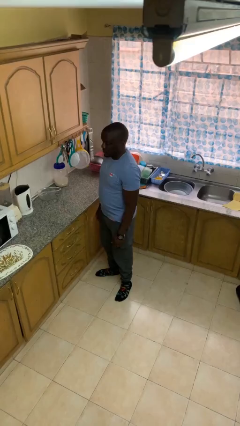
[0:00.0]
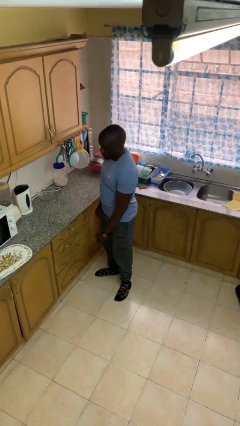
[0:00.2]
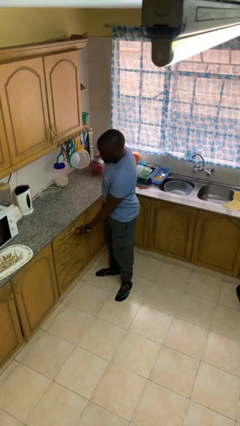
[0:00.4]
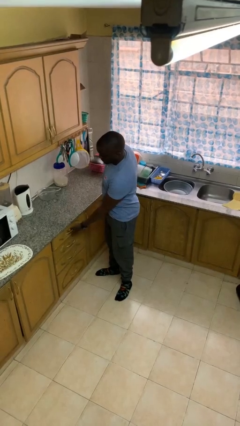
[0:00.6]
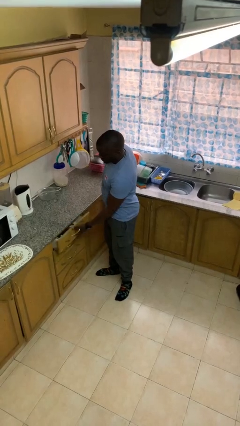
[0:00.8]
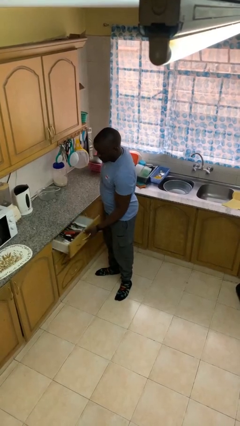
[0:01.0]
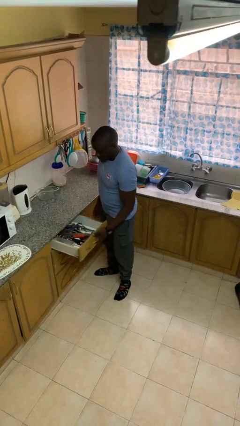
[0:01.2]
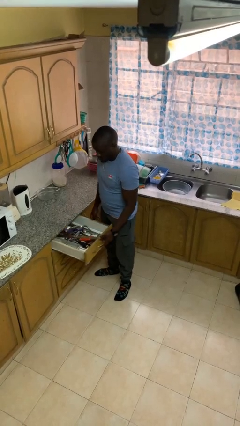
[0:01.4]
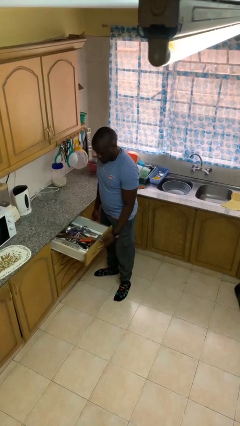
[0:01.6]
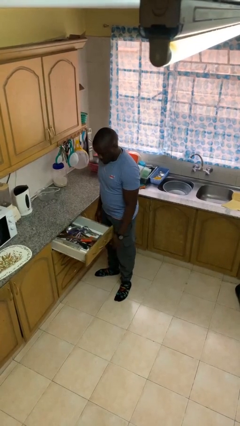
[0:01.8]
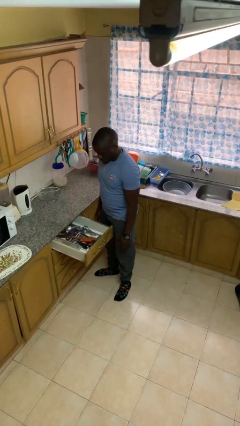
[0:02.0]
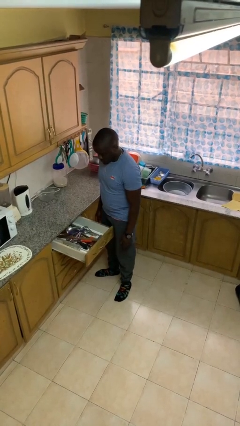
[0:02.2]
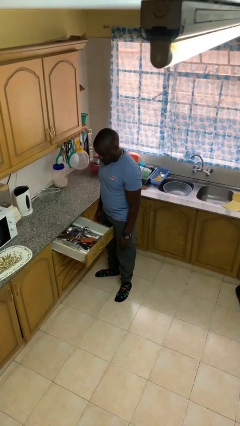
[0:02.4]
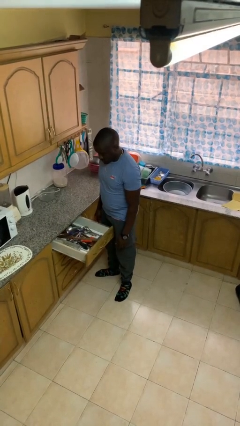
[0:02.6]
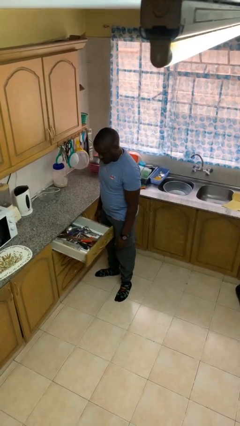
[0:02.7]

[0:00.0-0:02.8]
person opens kitchen drawer

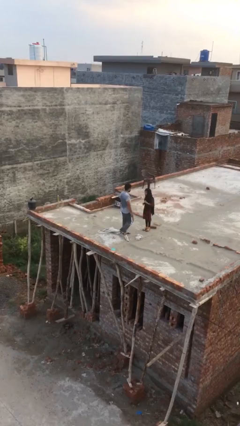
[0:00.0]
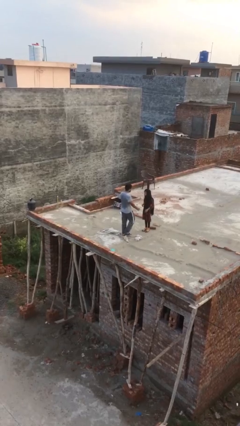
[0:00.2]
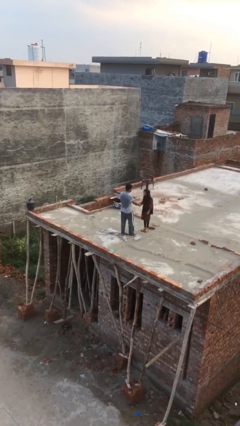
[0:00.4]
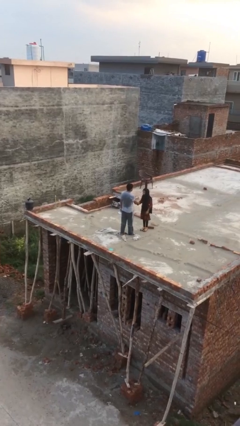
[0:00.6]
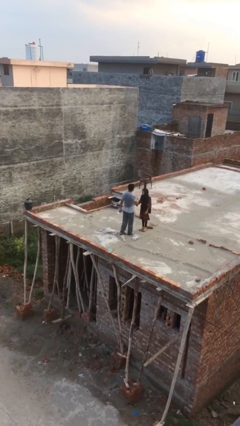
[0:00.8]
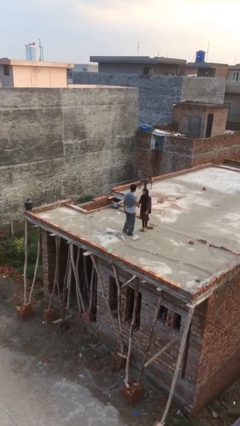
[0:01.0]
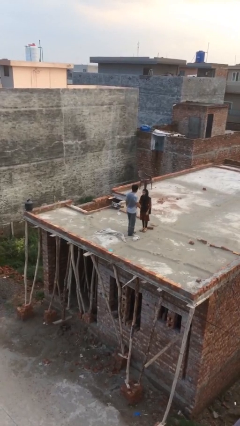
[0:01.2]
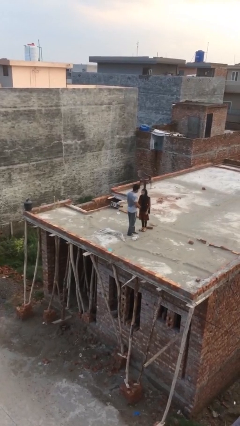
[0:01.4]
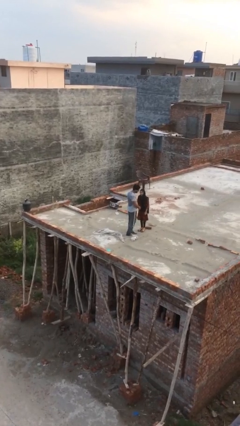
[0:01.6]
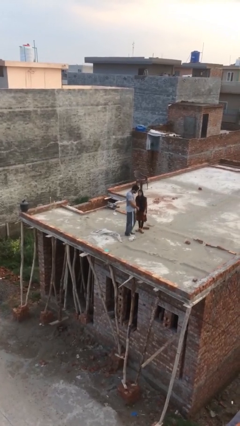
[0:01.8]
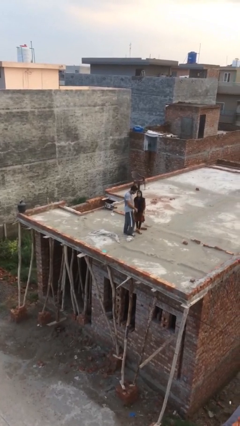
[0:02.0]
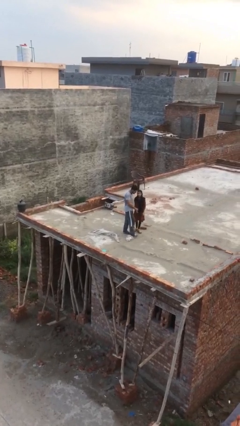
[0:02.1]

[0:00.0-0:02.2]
person shakes hand

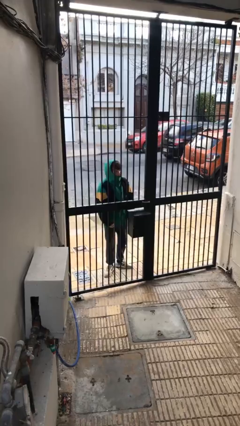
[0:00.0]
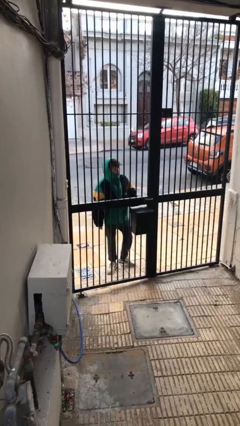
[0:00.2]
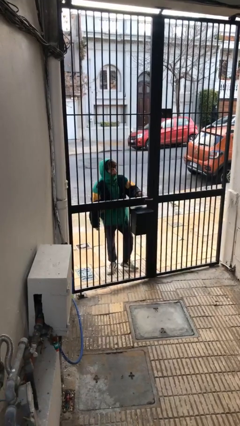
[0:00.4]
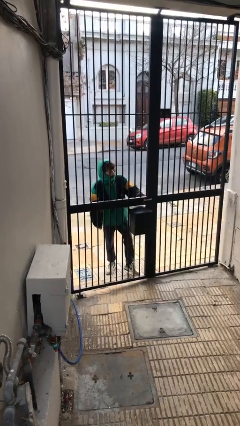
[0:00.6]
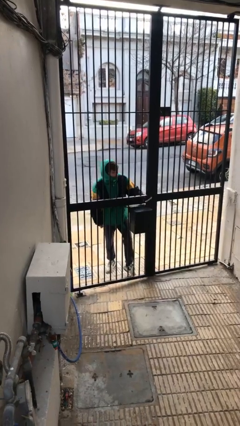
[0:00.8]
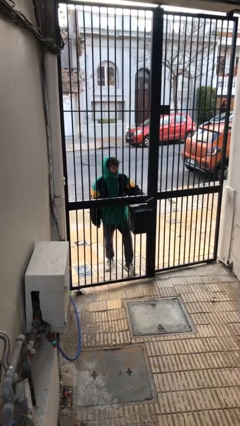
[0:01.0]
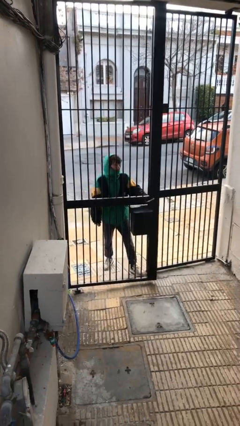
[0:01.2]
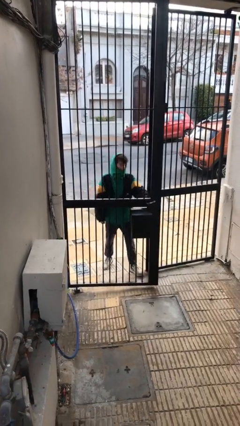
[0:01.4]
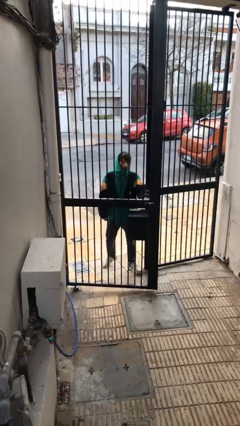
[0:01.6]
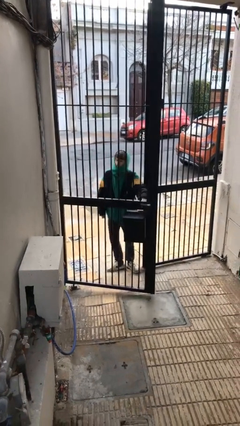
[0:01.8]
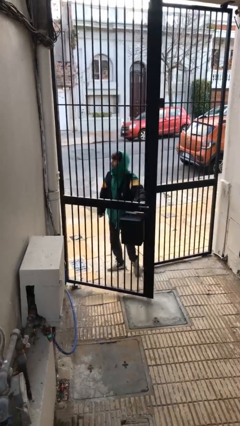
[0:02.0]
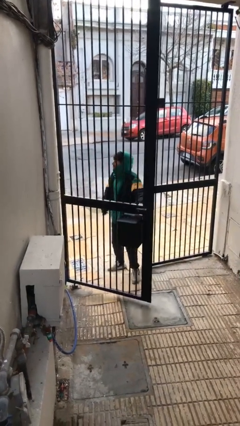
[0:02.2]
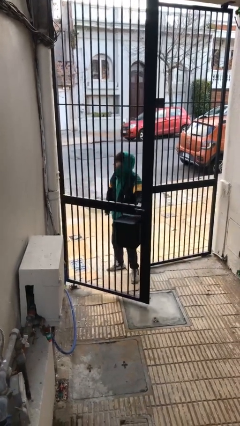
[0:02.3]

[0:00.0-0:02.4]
person opens gate

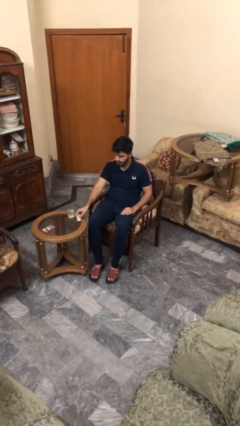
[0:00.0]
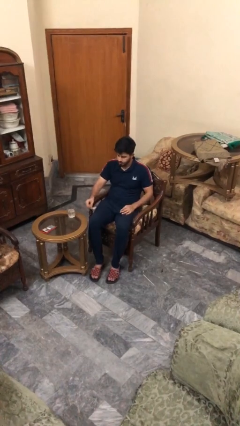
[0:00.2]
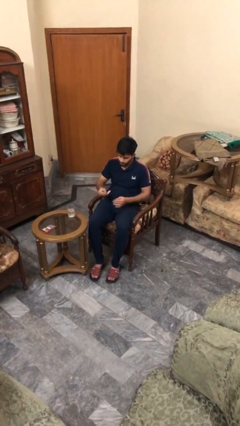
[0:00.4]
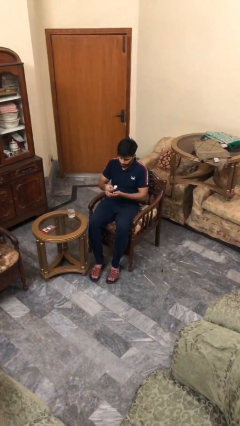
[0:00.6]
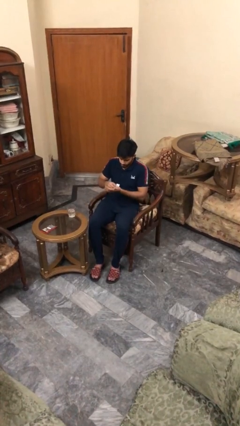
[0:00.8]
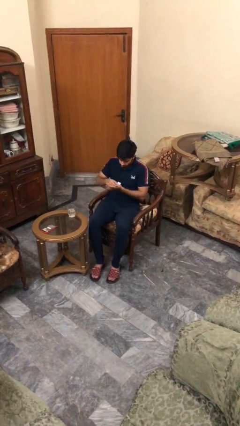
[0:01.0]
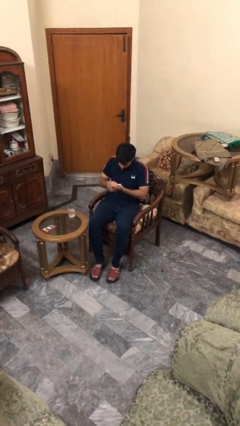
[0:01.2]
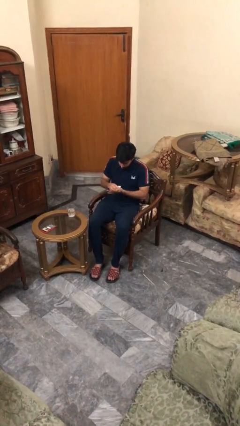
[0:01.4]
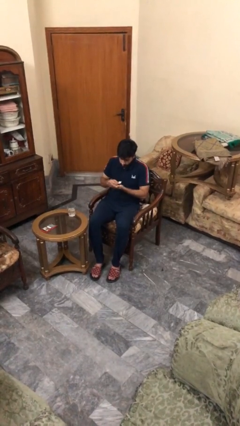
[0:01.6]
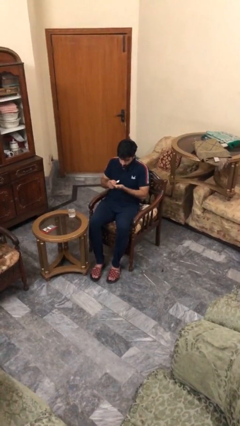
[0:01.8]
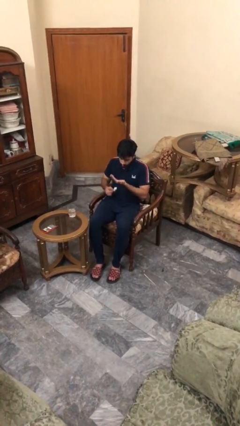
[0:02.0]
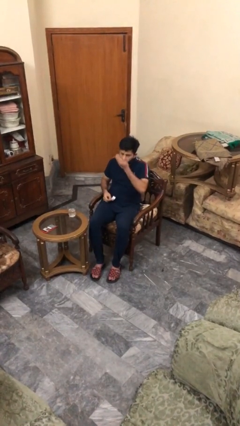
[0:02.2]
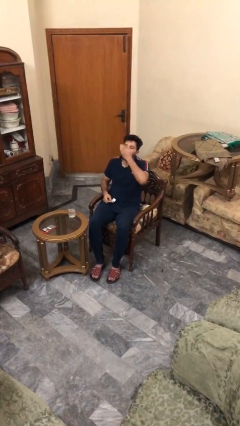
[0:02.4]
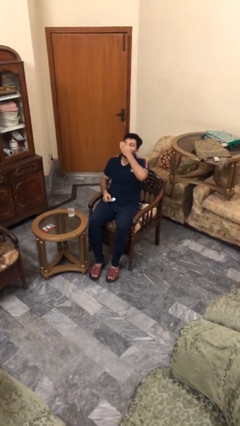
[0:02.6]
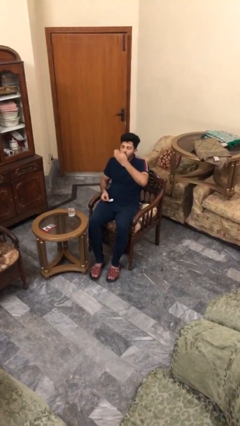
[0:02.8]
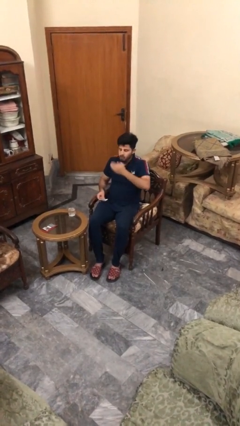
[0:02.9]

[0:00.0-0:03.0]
person takes medicine pills

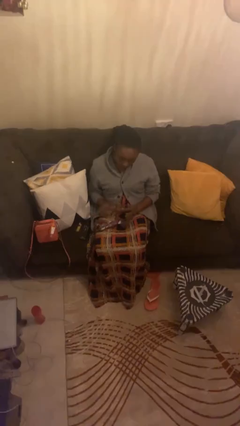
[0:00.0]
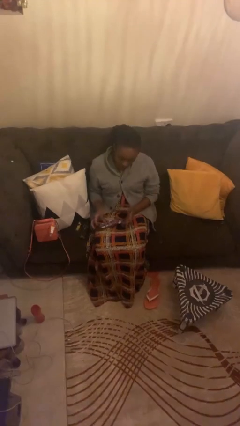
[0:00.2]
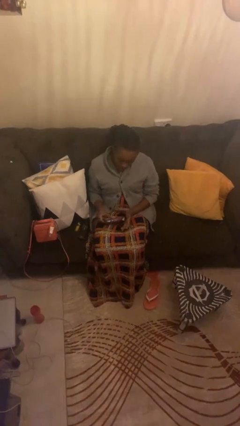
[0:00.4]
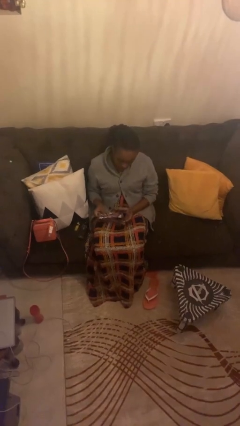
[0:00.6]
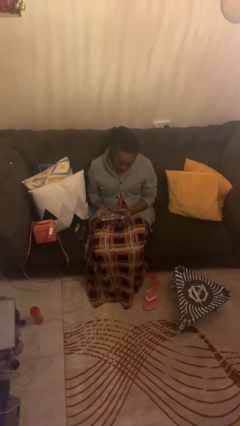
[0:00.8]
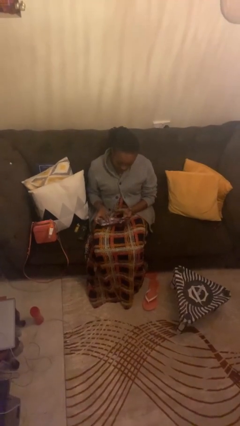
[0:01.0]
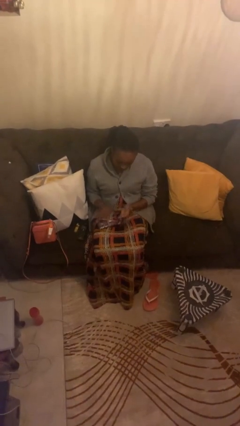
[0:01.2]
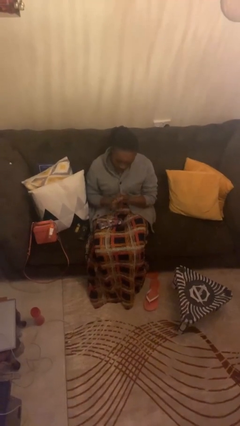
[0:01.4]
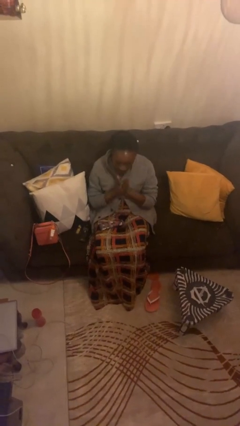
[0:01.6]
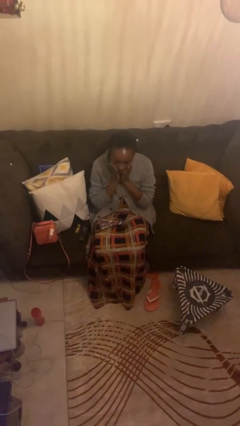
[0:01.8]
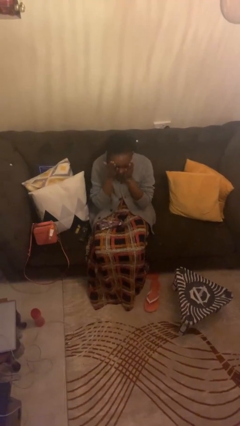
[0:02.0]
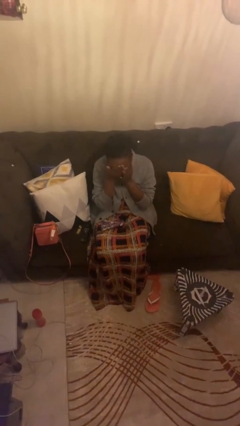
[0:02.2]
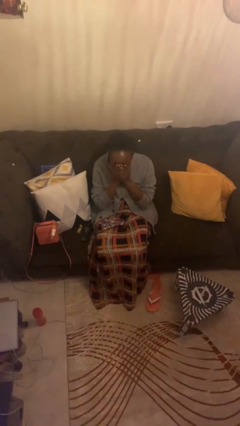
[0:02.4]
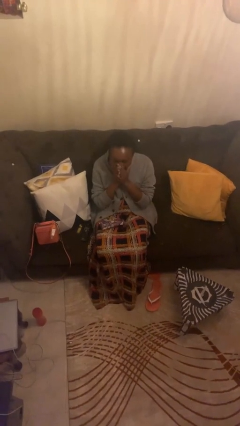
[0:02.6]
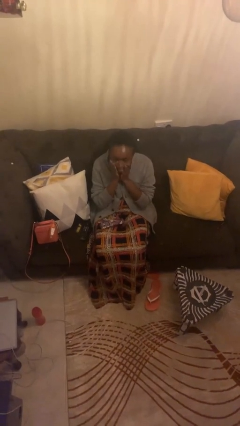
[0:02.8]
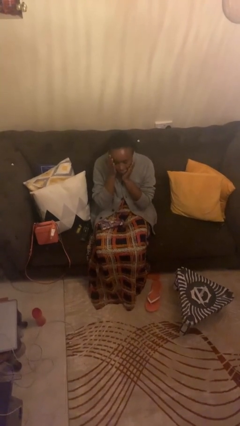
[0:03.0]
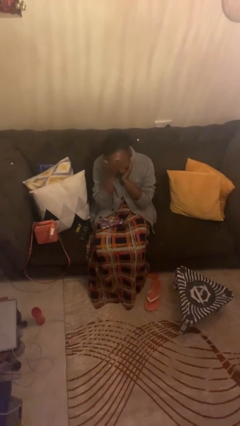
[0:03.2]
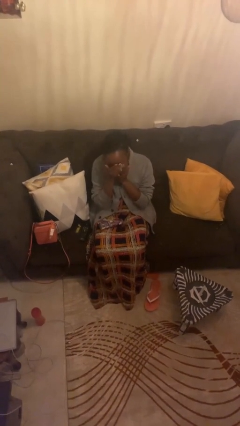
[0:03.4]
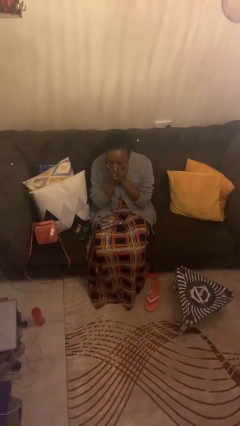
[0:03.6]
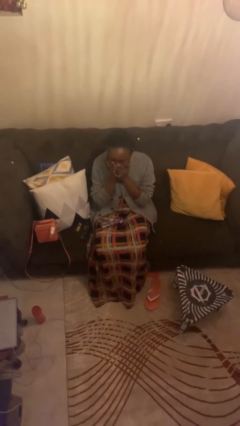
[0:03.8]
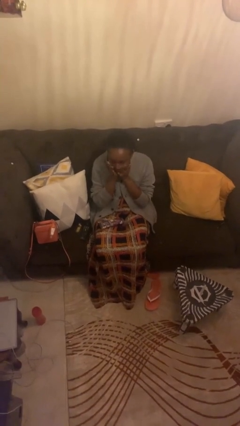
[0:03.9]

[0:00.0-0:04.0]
person applies facial moisturizer

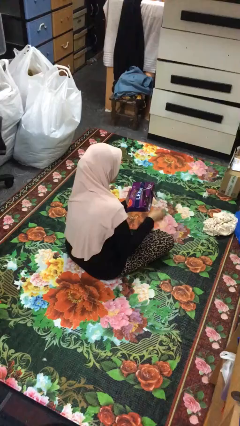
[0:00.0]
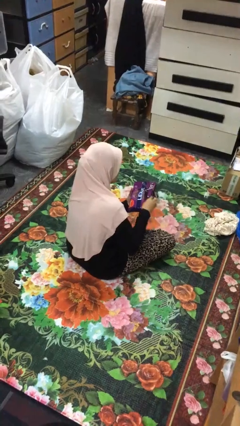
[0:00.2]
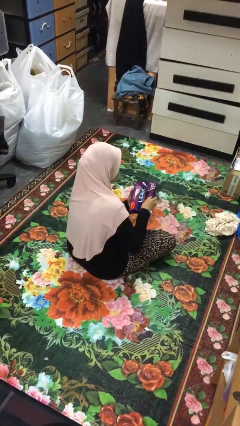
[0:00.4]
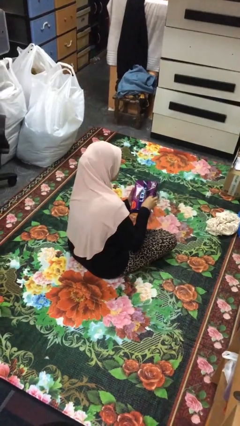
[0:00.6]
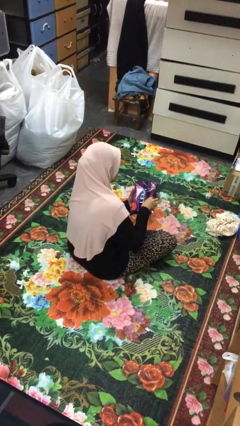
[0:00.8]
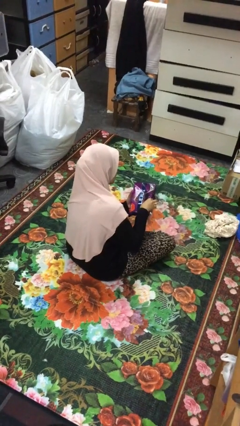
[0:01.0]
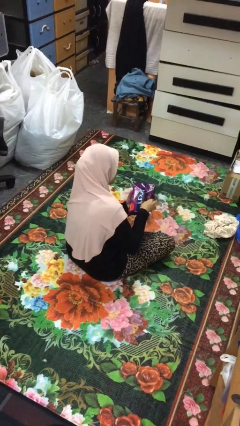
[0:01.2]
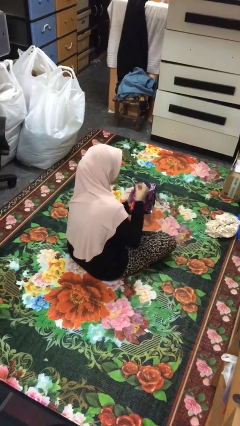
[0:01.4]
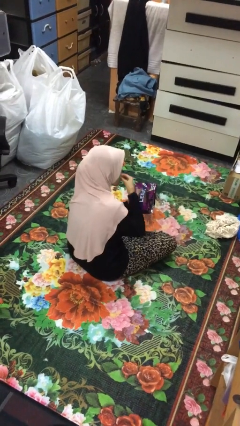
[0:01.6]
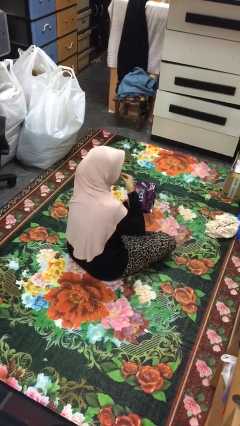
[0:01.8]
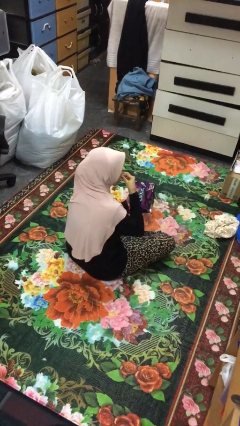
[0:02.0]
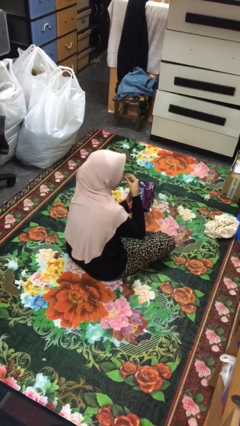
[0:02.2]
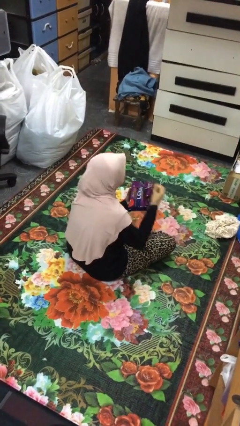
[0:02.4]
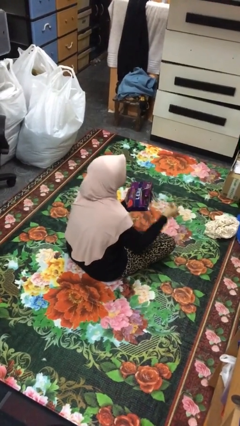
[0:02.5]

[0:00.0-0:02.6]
person eats snack from bag

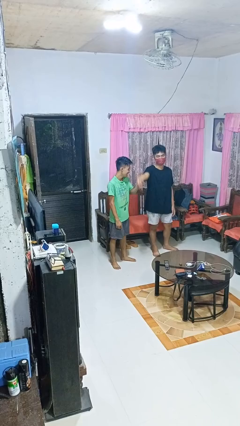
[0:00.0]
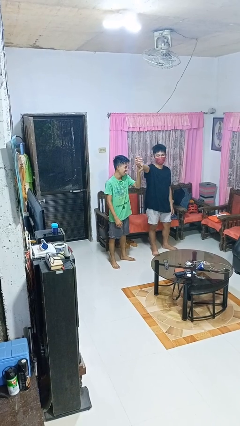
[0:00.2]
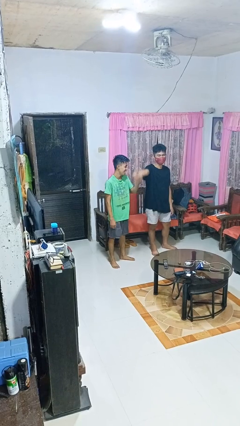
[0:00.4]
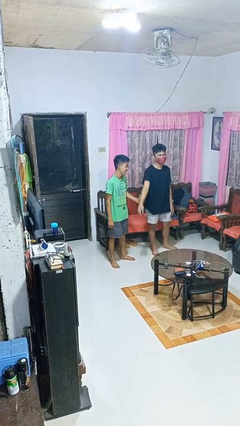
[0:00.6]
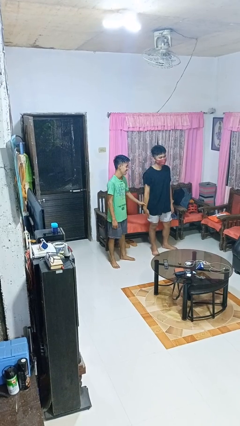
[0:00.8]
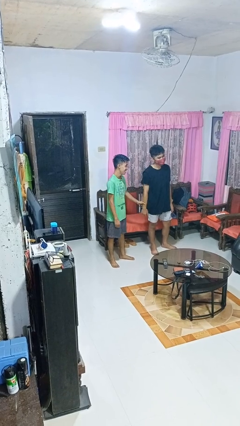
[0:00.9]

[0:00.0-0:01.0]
person grabs person by forearm
